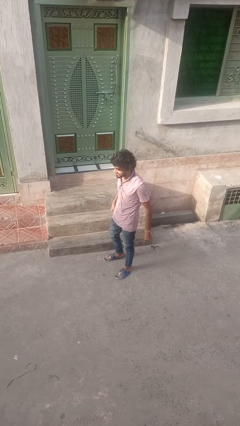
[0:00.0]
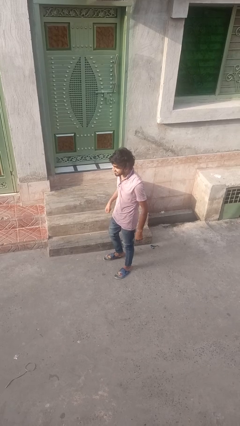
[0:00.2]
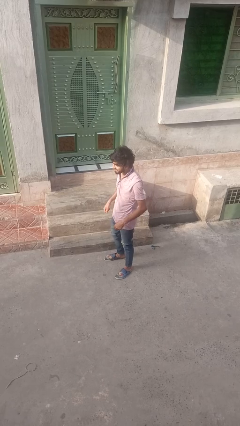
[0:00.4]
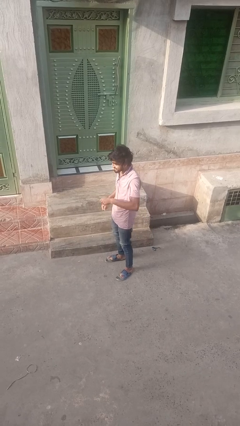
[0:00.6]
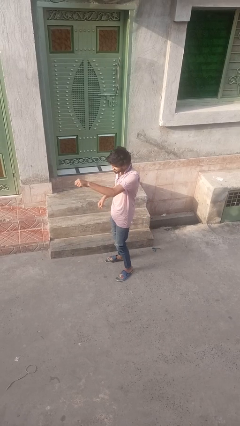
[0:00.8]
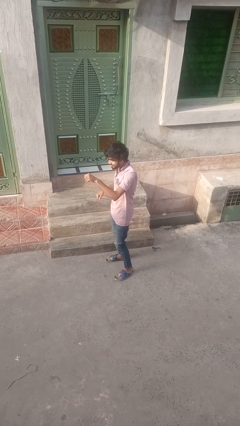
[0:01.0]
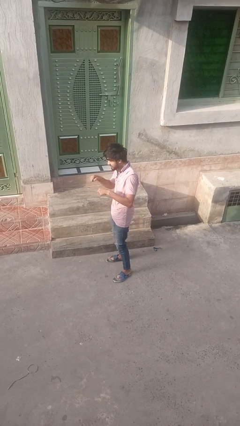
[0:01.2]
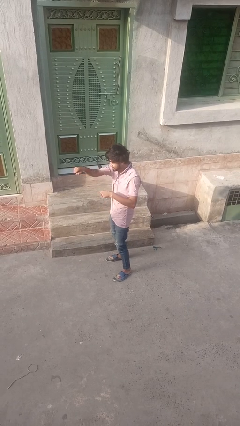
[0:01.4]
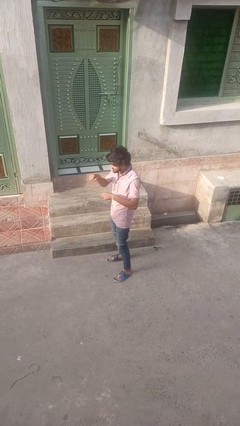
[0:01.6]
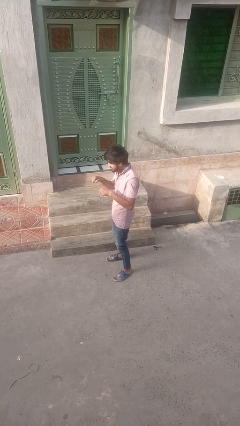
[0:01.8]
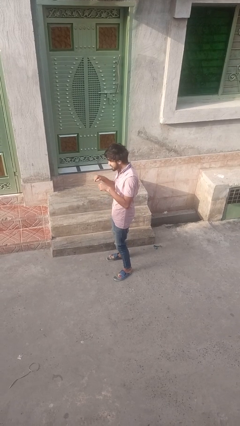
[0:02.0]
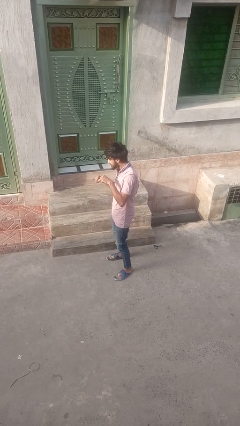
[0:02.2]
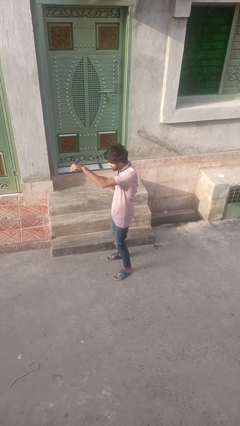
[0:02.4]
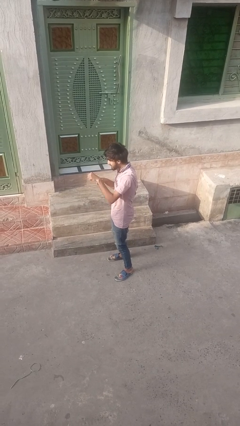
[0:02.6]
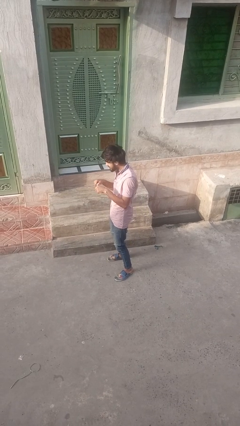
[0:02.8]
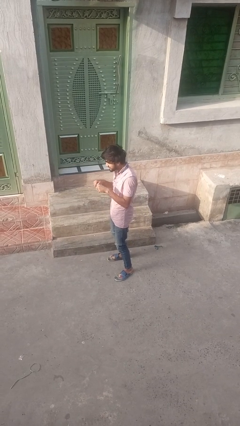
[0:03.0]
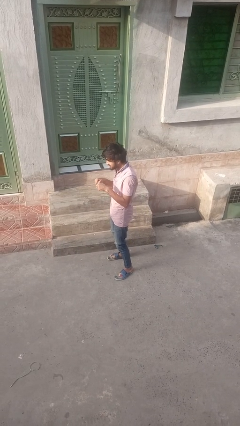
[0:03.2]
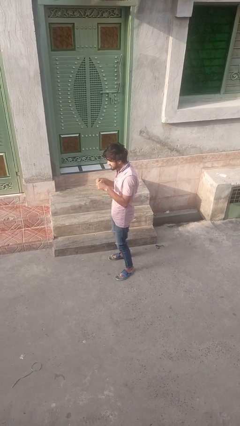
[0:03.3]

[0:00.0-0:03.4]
person punches

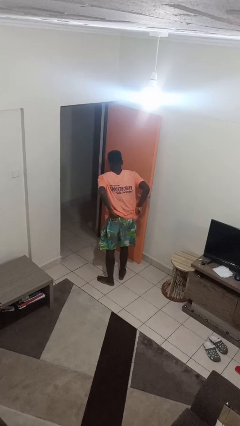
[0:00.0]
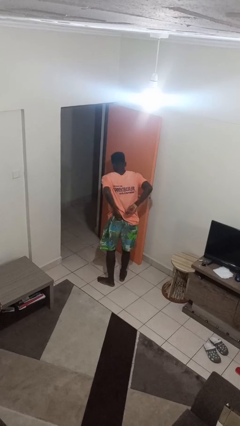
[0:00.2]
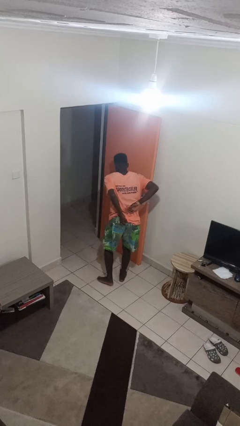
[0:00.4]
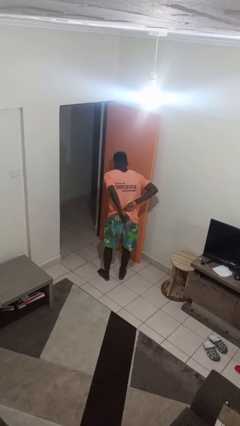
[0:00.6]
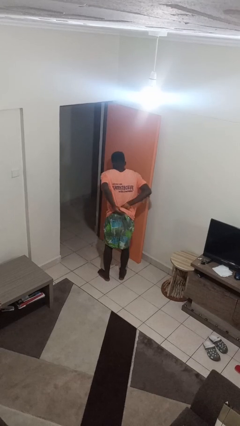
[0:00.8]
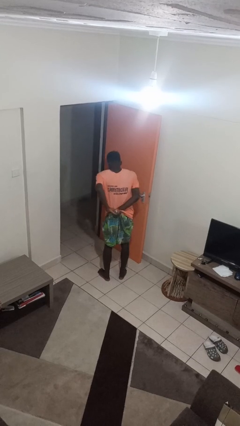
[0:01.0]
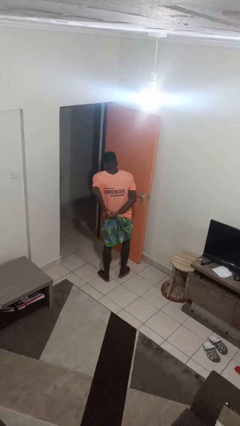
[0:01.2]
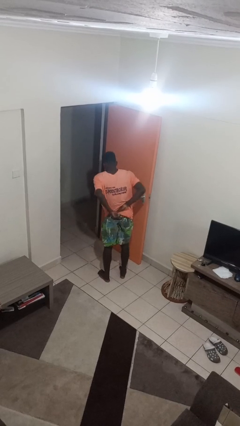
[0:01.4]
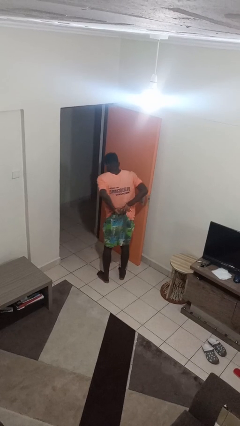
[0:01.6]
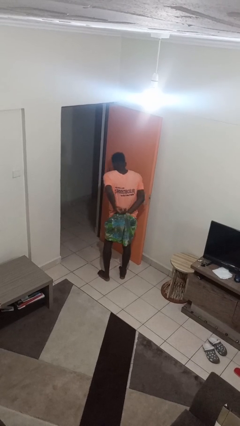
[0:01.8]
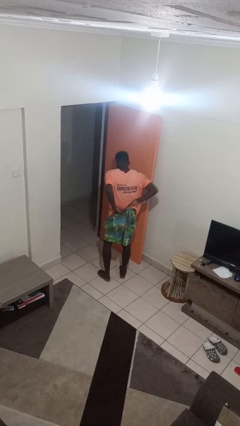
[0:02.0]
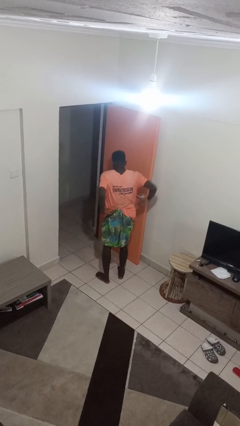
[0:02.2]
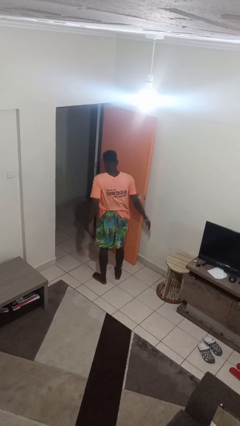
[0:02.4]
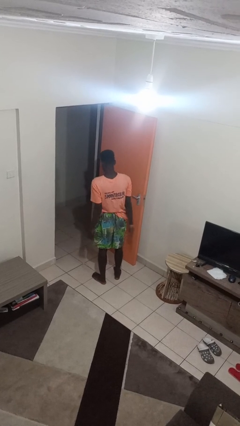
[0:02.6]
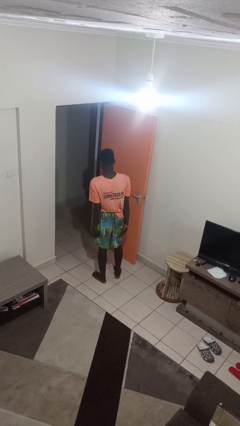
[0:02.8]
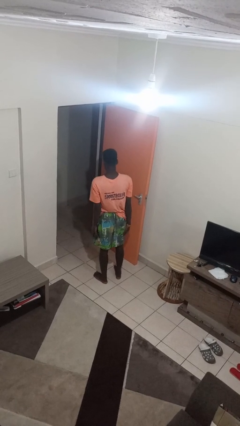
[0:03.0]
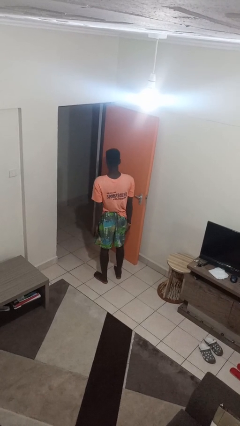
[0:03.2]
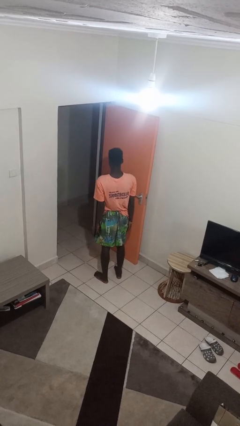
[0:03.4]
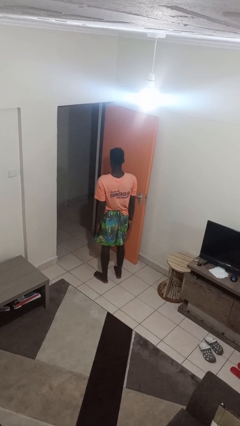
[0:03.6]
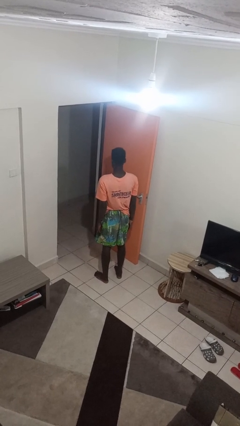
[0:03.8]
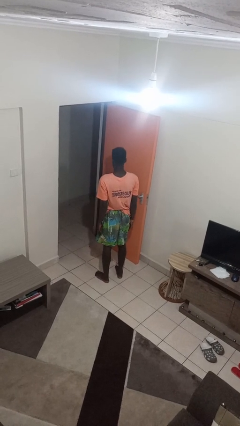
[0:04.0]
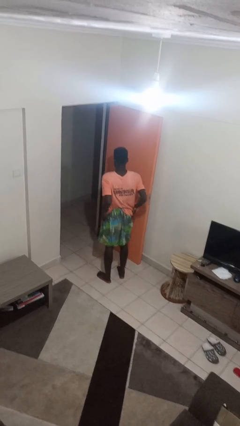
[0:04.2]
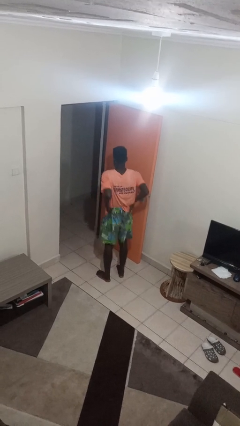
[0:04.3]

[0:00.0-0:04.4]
person tucks in shirt

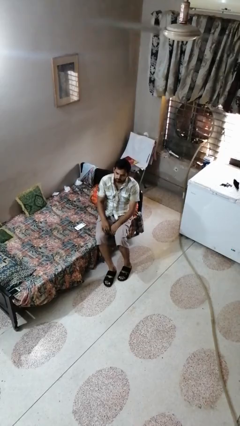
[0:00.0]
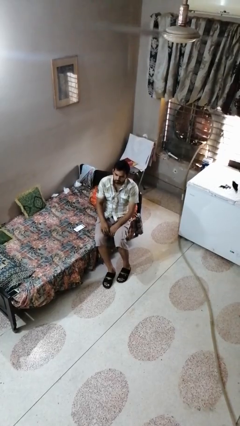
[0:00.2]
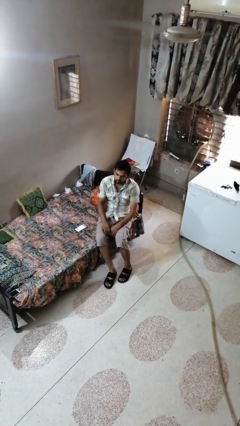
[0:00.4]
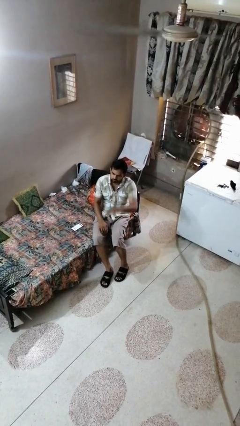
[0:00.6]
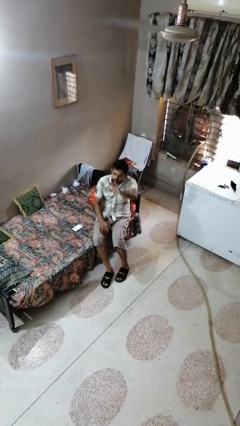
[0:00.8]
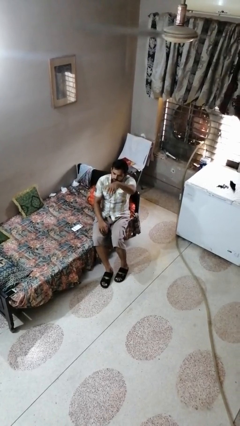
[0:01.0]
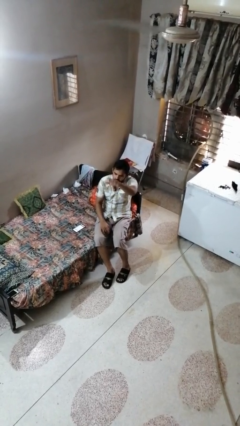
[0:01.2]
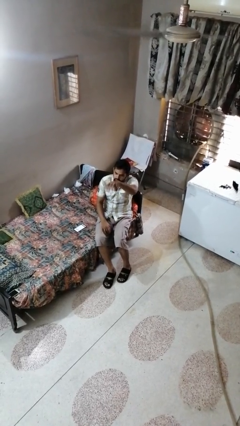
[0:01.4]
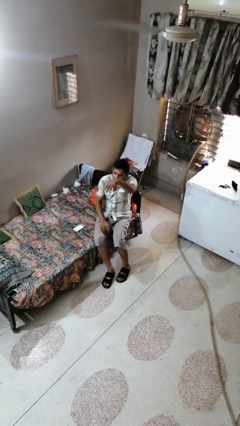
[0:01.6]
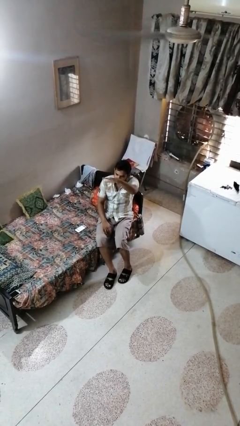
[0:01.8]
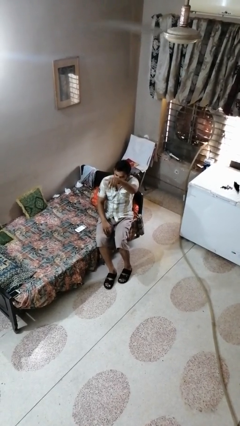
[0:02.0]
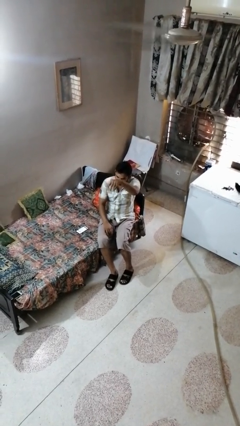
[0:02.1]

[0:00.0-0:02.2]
person gestures come here

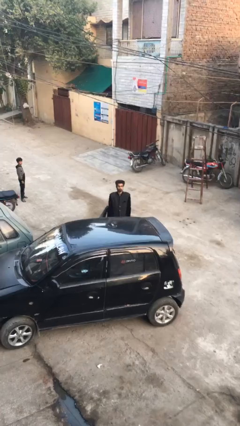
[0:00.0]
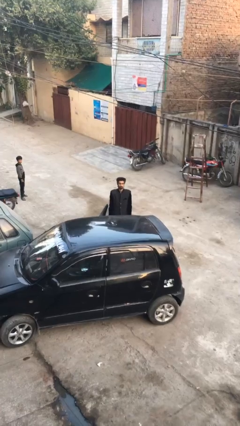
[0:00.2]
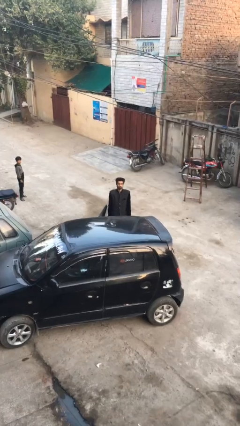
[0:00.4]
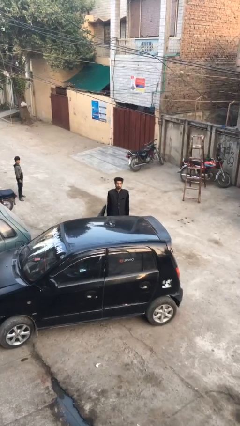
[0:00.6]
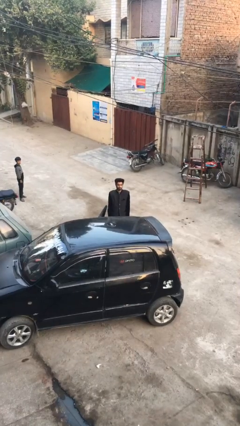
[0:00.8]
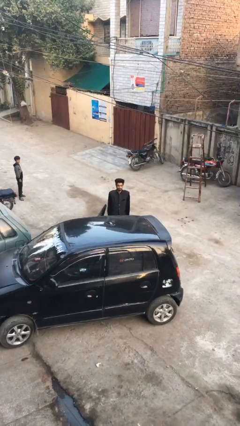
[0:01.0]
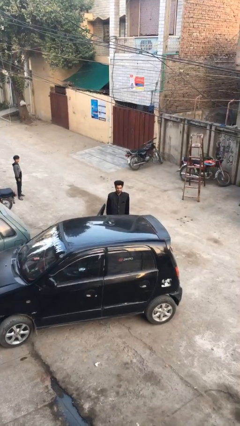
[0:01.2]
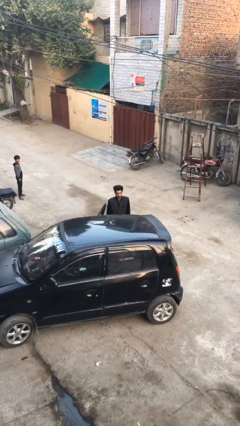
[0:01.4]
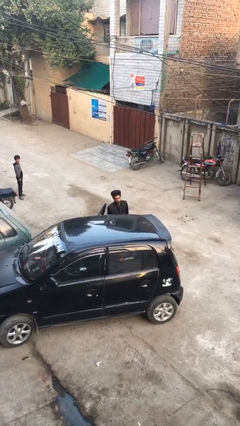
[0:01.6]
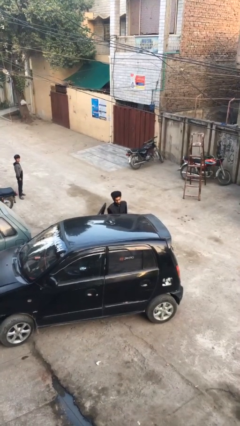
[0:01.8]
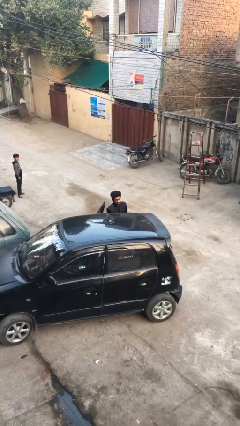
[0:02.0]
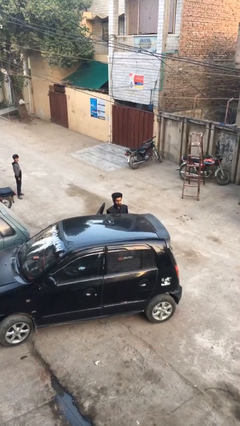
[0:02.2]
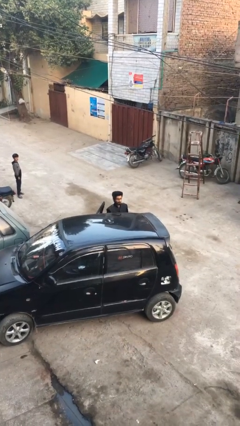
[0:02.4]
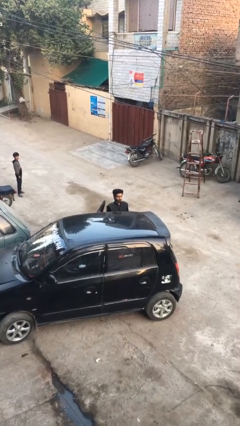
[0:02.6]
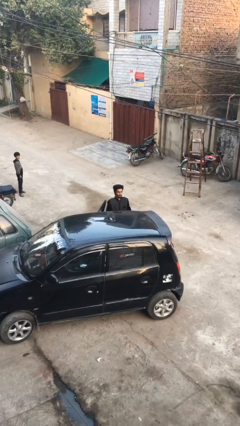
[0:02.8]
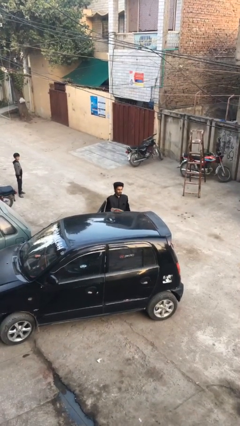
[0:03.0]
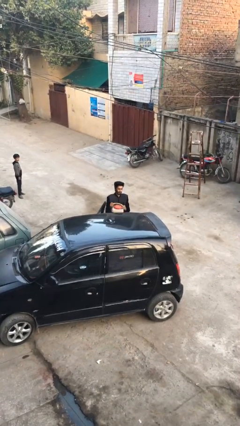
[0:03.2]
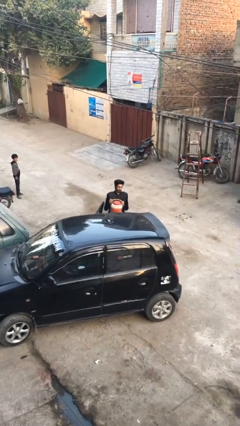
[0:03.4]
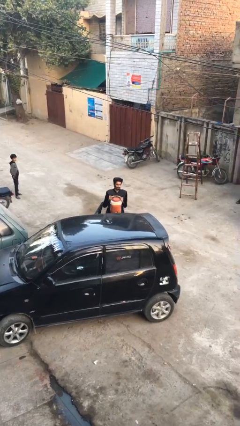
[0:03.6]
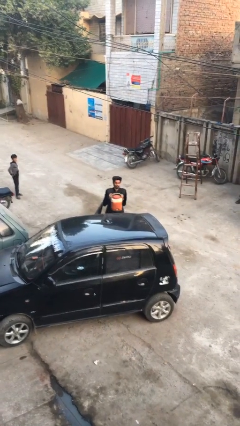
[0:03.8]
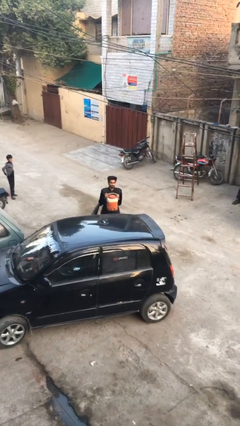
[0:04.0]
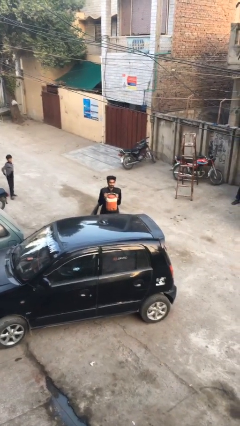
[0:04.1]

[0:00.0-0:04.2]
person unloads car

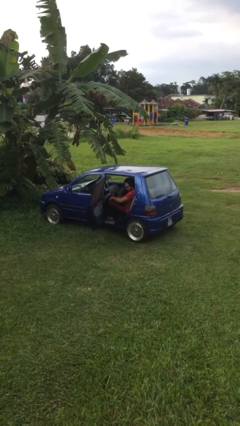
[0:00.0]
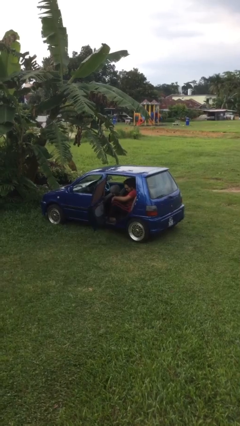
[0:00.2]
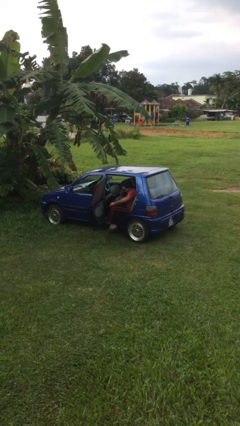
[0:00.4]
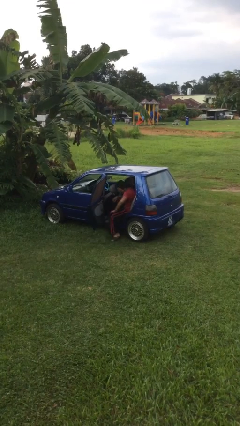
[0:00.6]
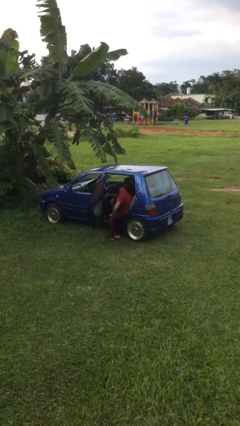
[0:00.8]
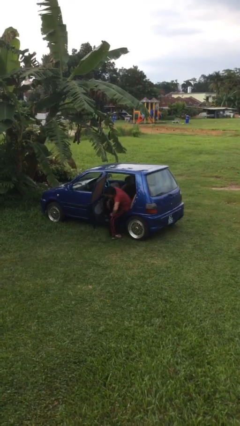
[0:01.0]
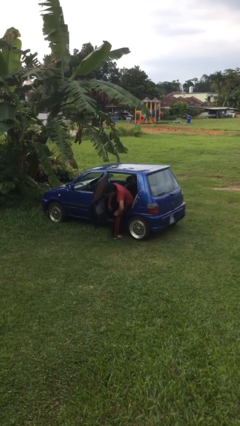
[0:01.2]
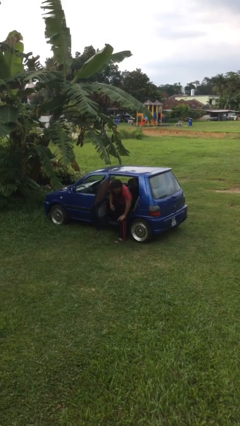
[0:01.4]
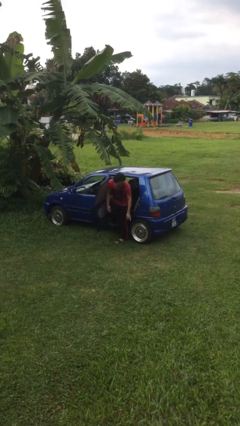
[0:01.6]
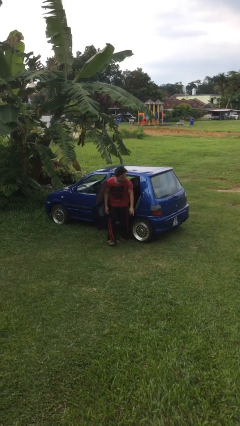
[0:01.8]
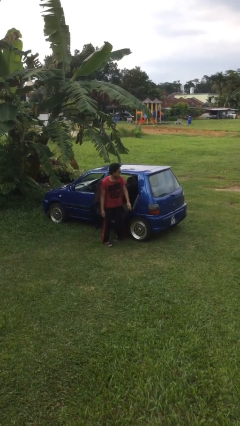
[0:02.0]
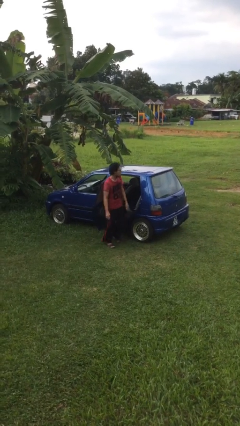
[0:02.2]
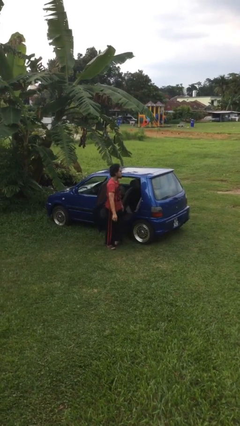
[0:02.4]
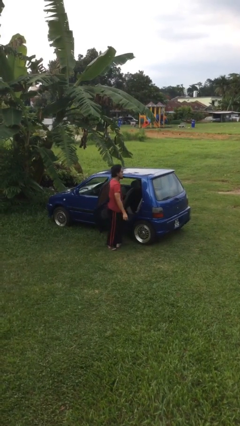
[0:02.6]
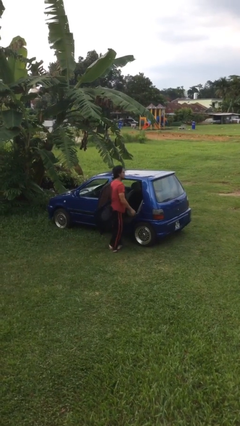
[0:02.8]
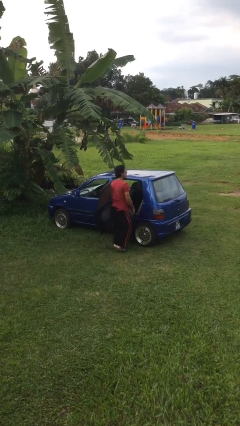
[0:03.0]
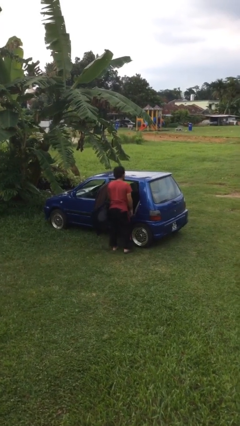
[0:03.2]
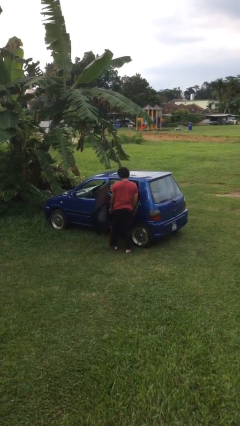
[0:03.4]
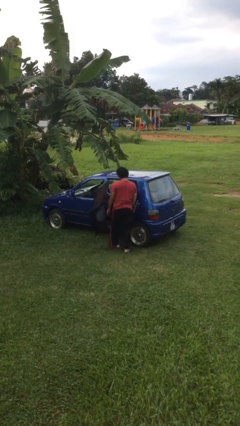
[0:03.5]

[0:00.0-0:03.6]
person exits car
